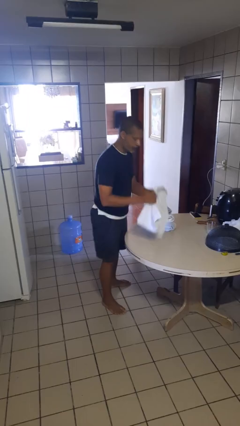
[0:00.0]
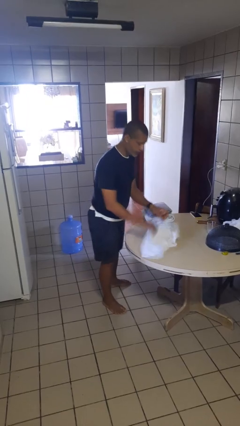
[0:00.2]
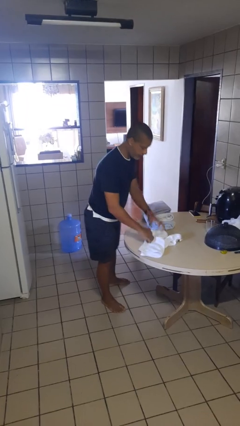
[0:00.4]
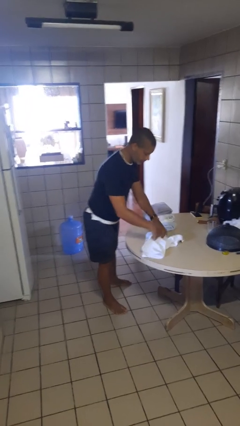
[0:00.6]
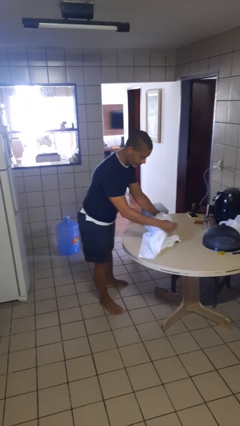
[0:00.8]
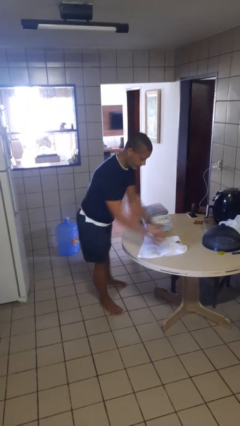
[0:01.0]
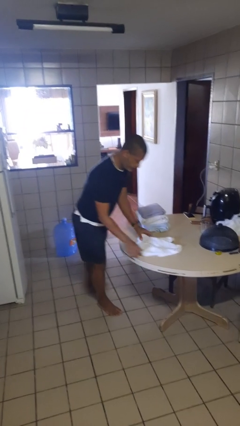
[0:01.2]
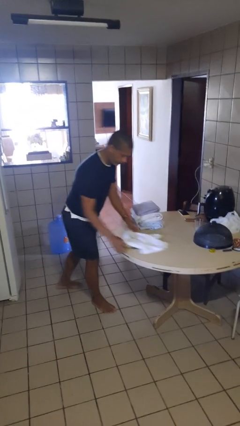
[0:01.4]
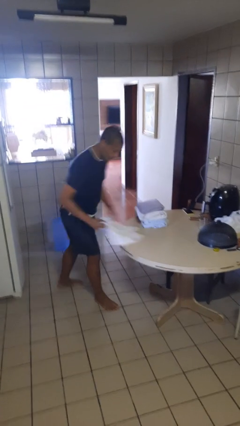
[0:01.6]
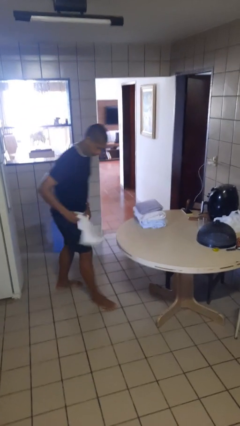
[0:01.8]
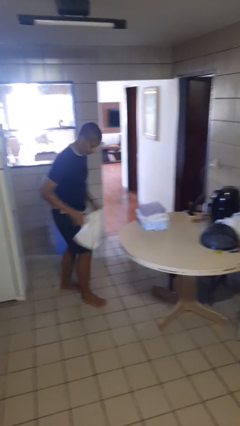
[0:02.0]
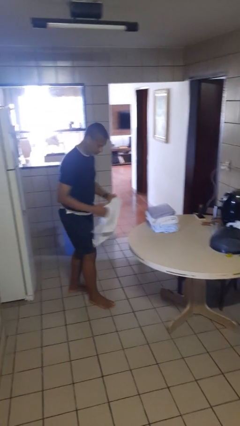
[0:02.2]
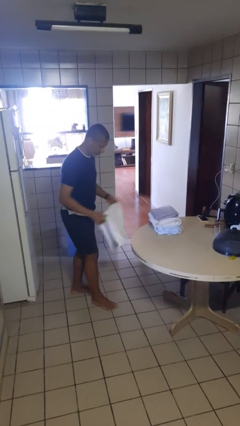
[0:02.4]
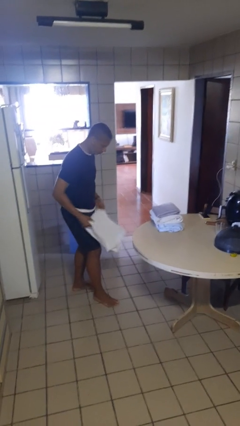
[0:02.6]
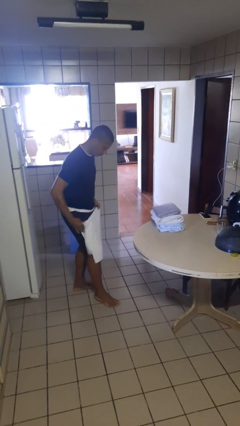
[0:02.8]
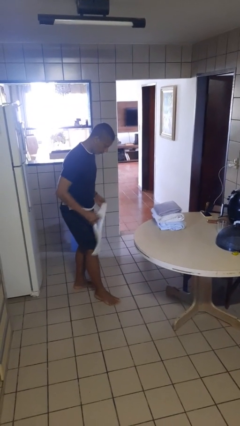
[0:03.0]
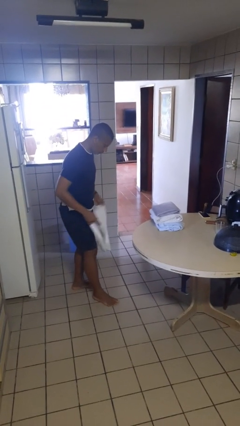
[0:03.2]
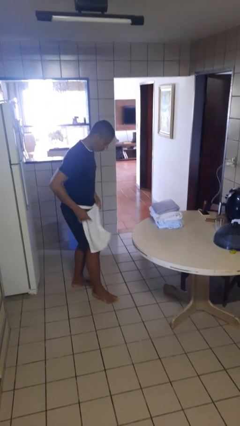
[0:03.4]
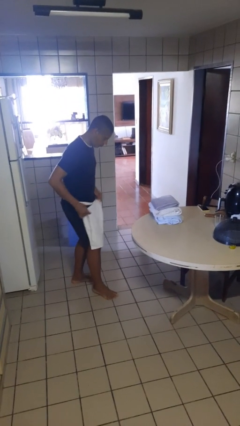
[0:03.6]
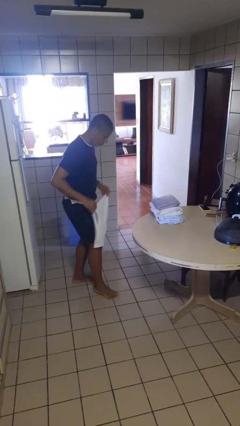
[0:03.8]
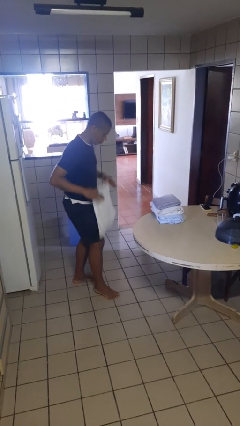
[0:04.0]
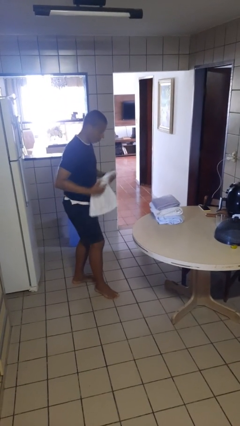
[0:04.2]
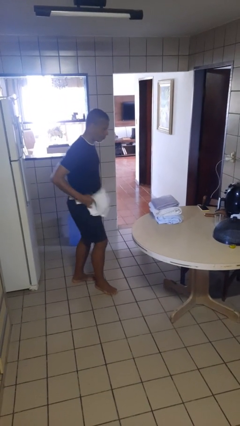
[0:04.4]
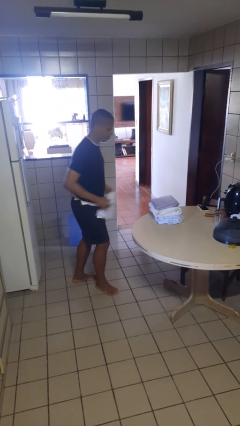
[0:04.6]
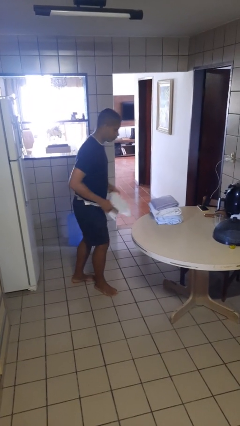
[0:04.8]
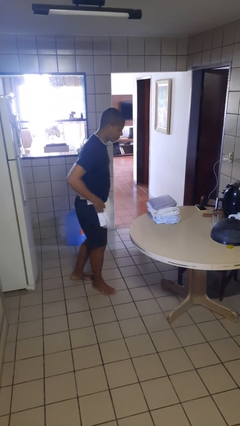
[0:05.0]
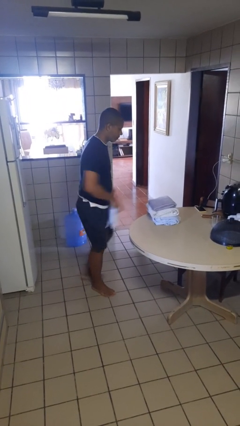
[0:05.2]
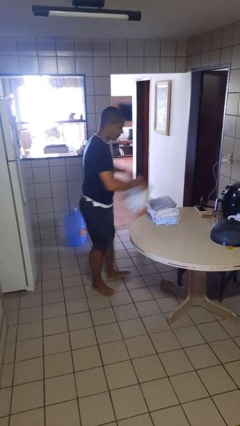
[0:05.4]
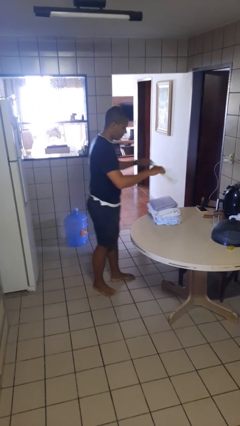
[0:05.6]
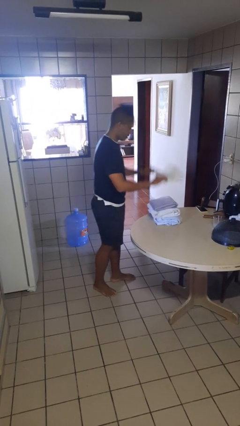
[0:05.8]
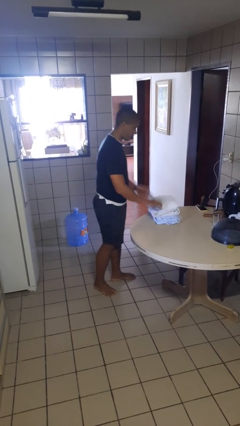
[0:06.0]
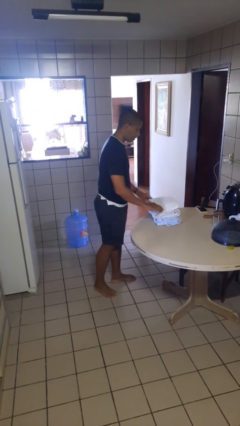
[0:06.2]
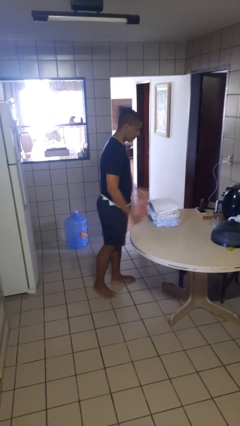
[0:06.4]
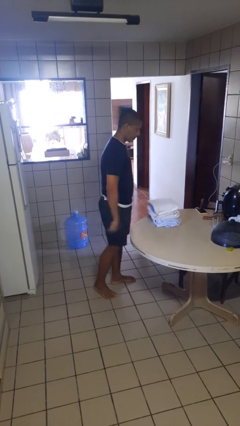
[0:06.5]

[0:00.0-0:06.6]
person folds towel

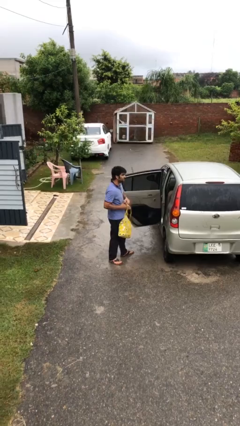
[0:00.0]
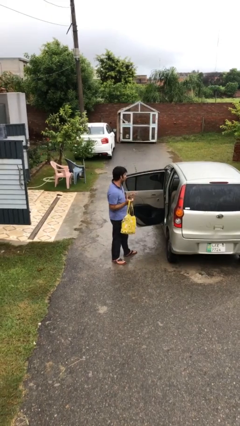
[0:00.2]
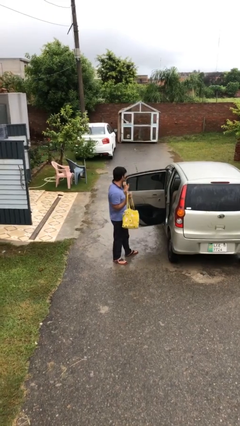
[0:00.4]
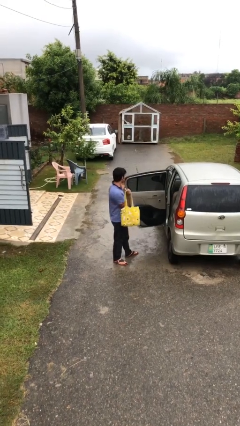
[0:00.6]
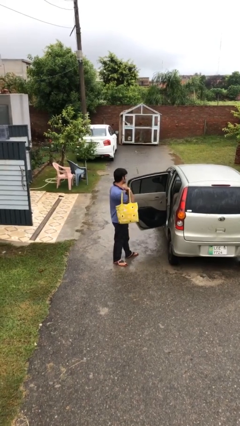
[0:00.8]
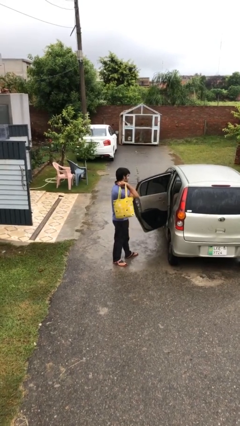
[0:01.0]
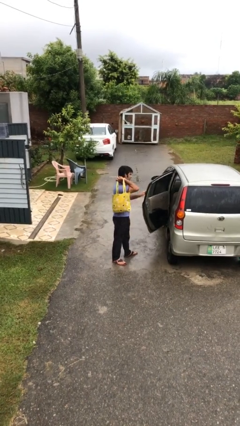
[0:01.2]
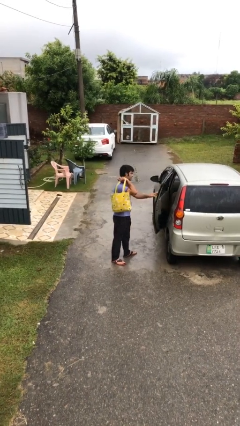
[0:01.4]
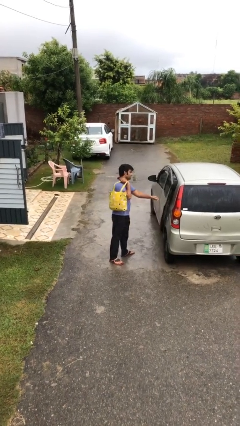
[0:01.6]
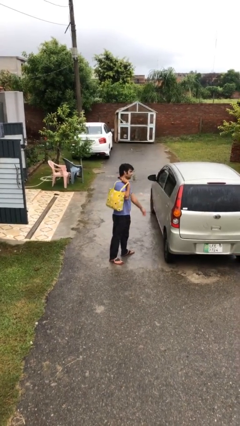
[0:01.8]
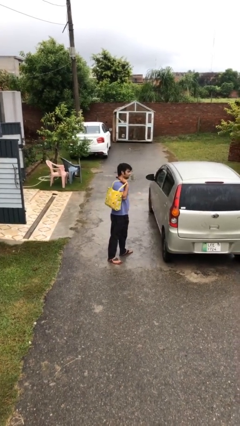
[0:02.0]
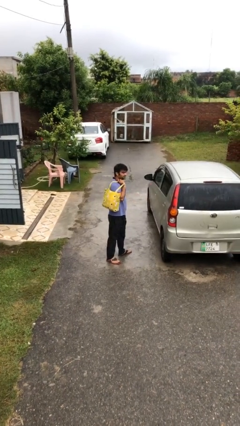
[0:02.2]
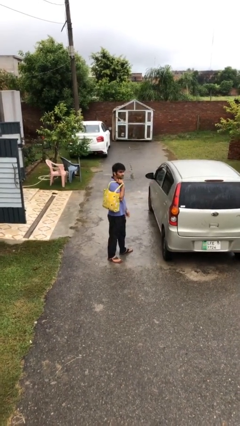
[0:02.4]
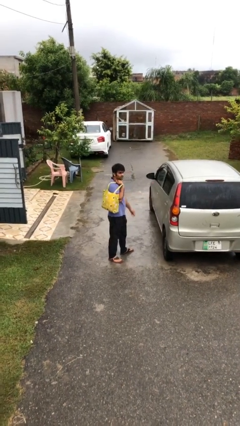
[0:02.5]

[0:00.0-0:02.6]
person closes car door

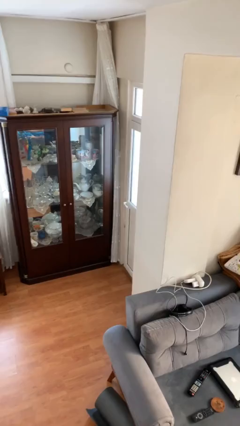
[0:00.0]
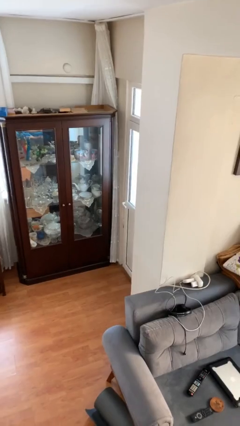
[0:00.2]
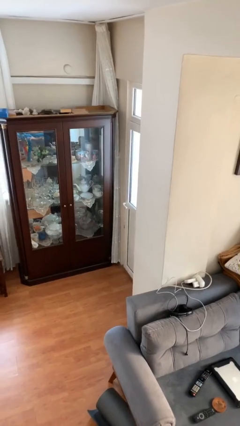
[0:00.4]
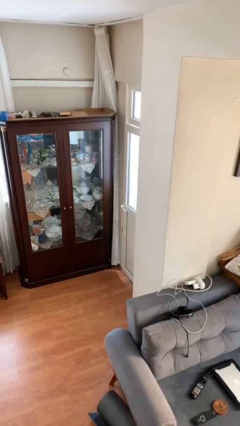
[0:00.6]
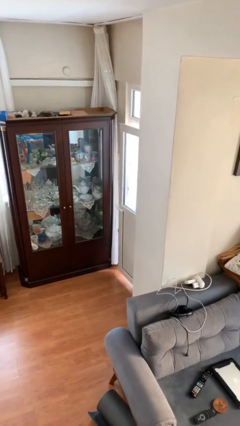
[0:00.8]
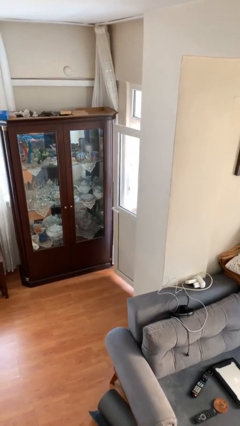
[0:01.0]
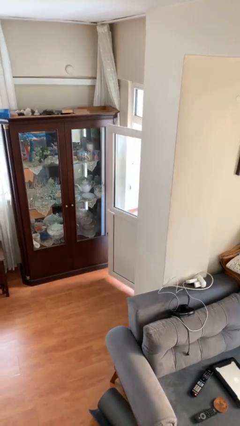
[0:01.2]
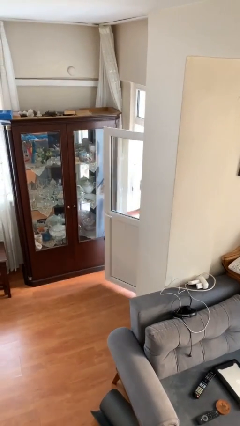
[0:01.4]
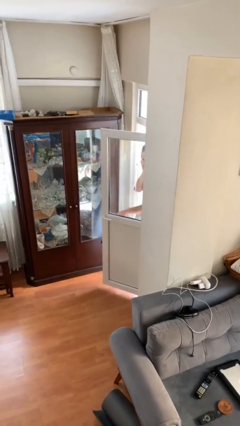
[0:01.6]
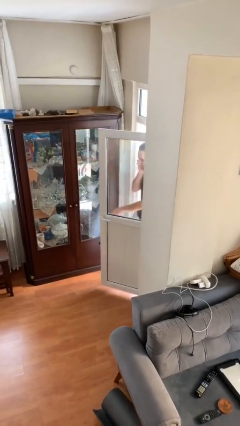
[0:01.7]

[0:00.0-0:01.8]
person opens facility door

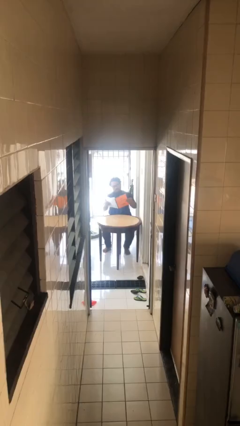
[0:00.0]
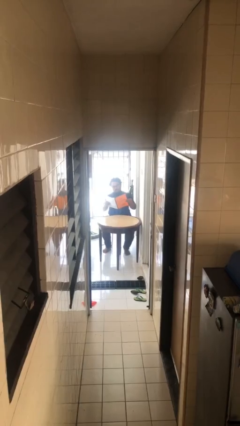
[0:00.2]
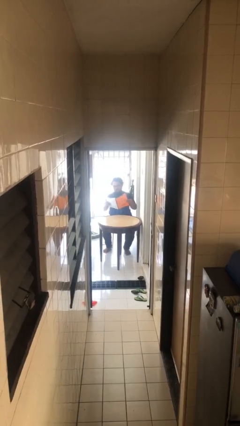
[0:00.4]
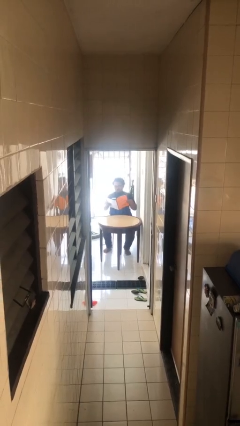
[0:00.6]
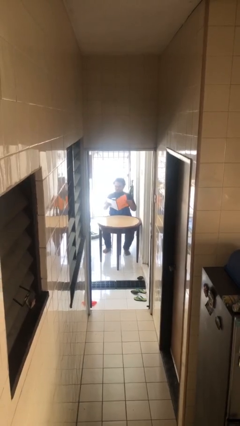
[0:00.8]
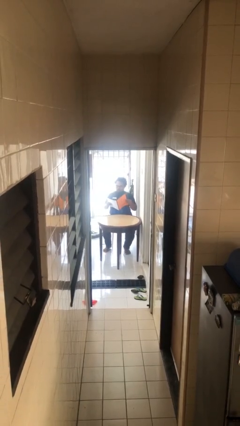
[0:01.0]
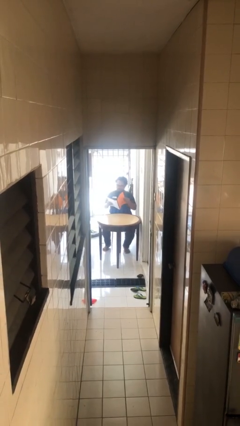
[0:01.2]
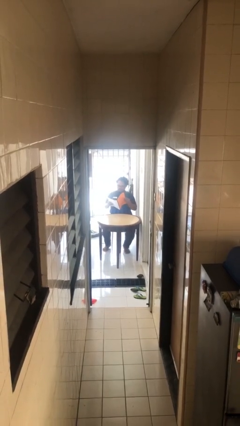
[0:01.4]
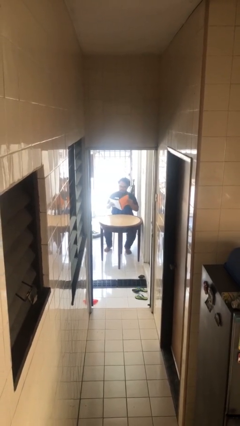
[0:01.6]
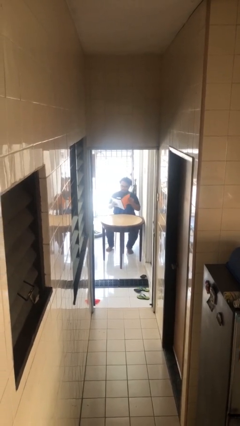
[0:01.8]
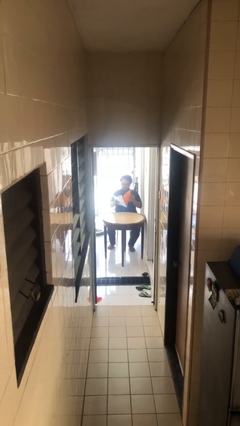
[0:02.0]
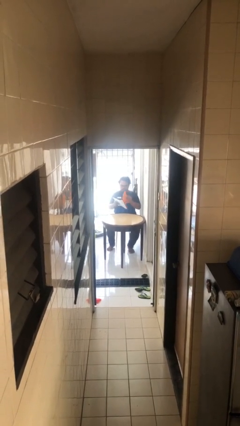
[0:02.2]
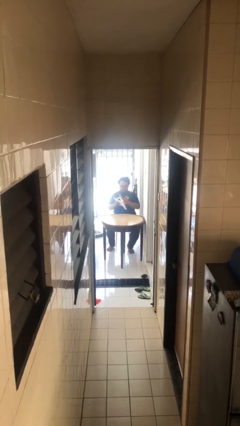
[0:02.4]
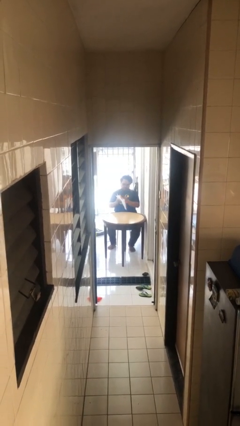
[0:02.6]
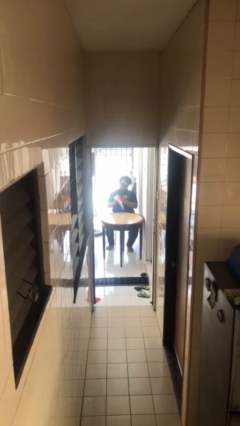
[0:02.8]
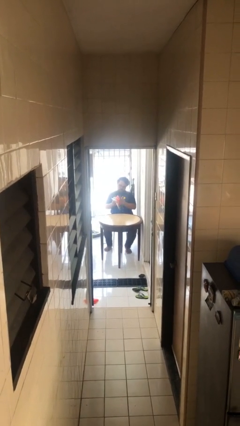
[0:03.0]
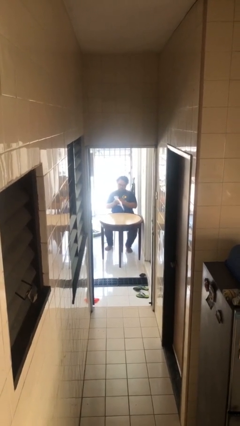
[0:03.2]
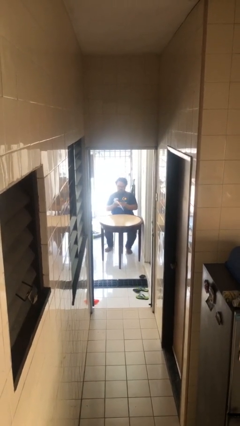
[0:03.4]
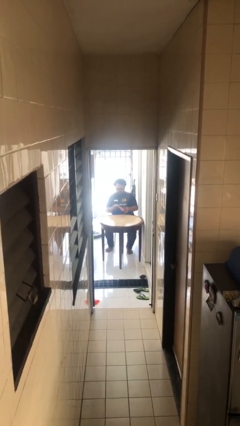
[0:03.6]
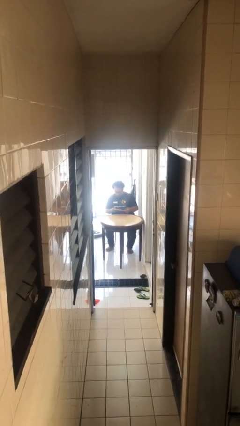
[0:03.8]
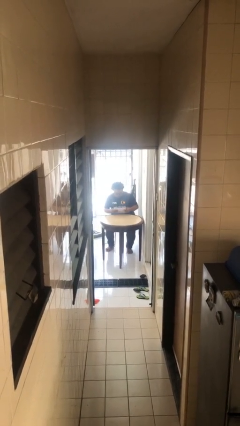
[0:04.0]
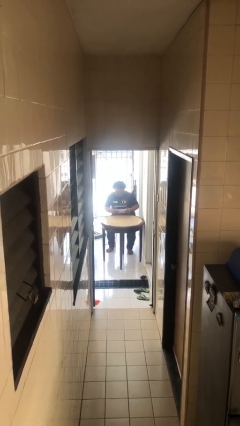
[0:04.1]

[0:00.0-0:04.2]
person reads document

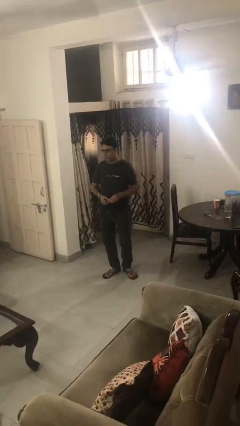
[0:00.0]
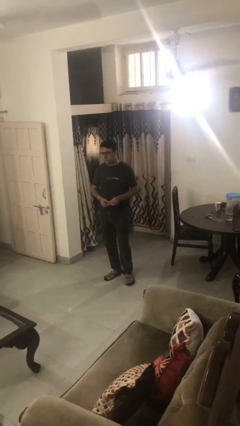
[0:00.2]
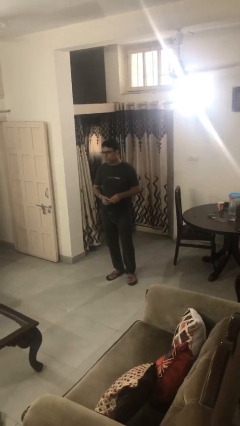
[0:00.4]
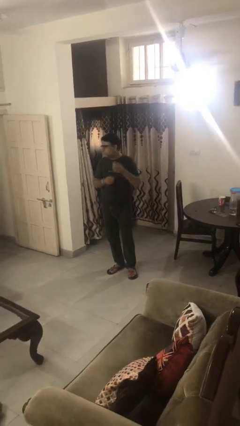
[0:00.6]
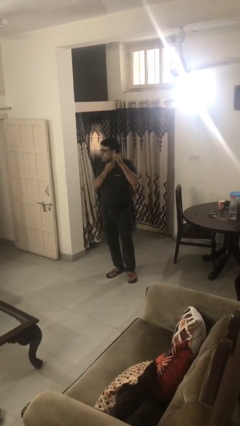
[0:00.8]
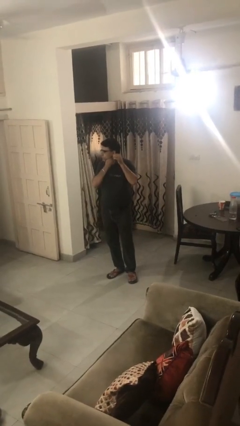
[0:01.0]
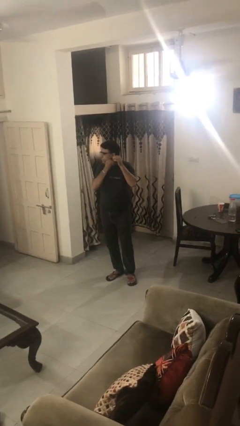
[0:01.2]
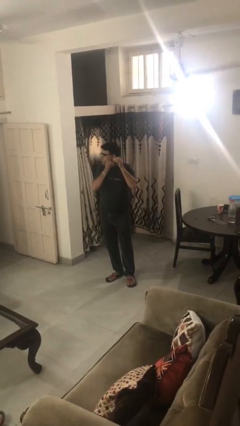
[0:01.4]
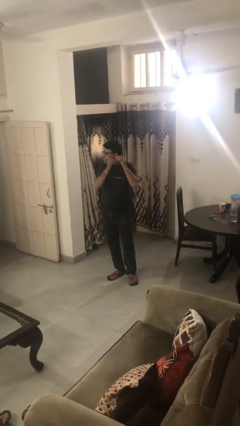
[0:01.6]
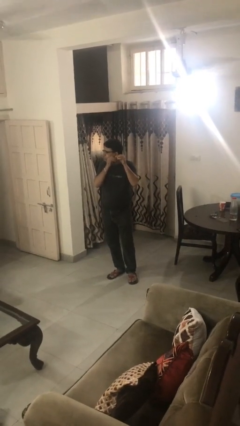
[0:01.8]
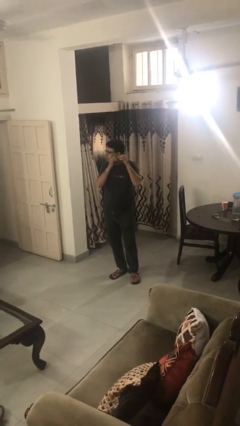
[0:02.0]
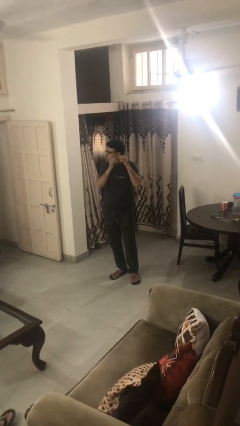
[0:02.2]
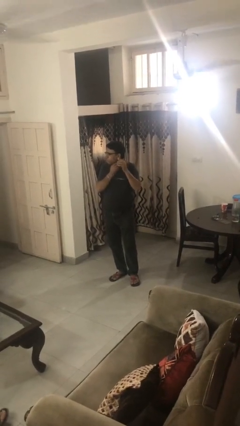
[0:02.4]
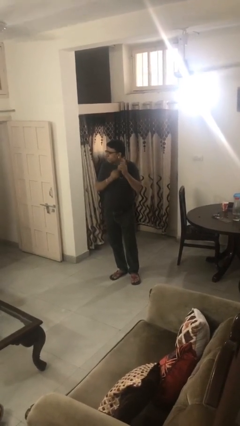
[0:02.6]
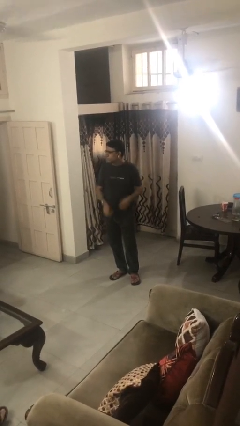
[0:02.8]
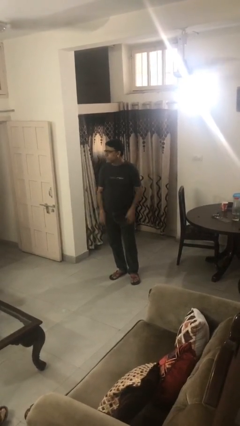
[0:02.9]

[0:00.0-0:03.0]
person puts on earrings
